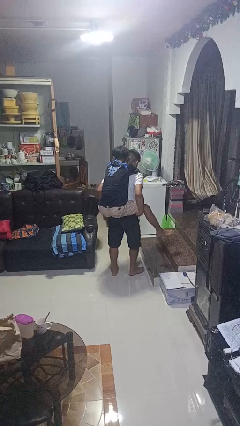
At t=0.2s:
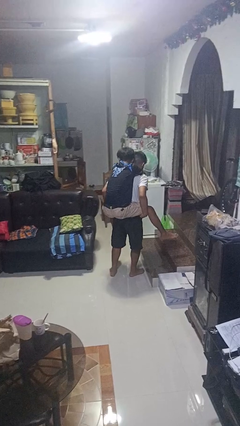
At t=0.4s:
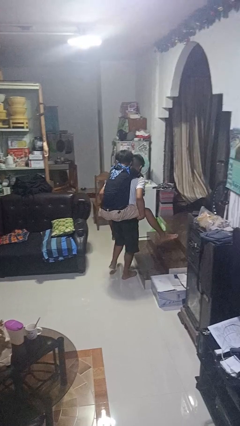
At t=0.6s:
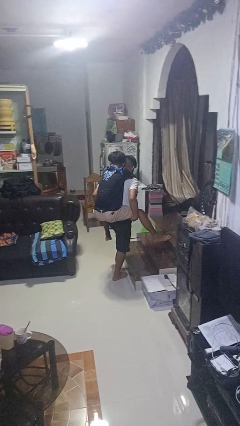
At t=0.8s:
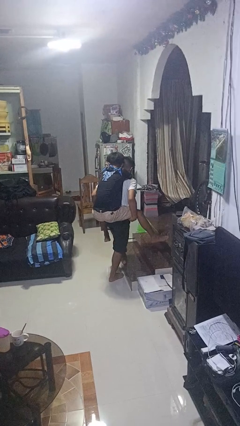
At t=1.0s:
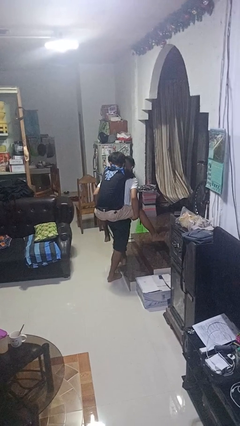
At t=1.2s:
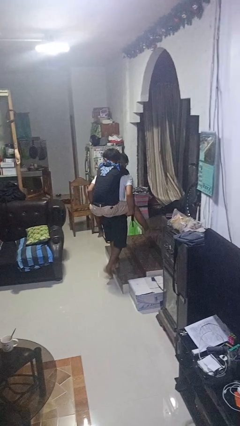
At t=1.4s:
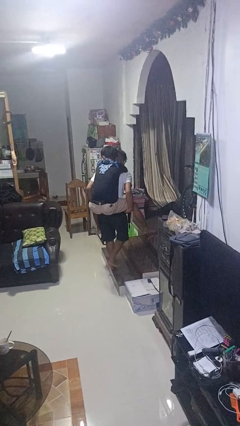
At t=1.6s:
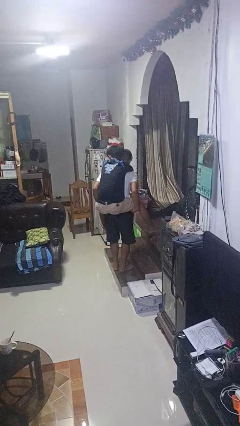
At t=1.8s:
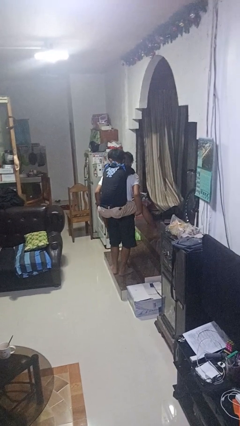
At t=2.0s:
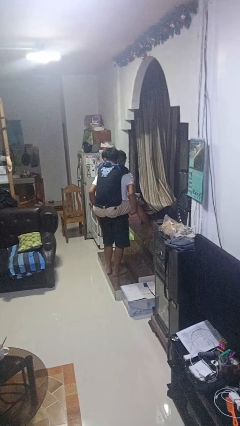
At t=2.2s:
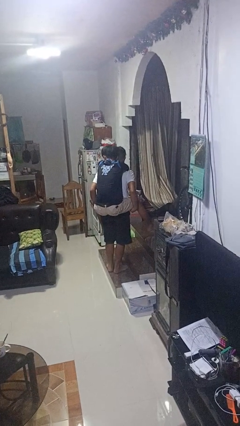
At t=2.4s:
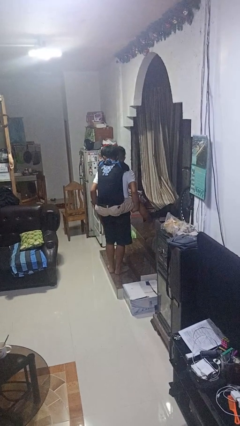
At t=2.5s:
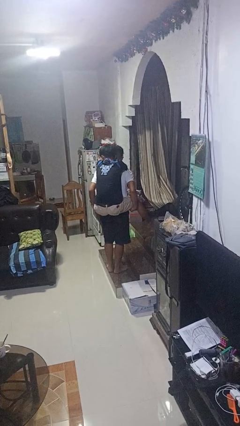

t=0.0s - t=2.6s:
person carries person on back

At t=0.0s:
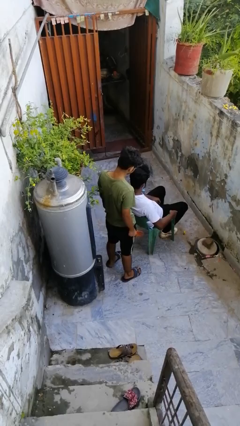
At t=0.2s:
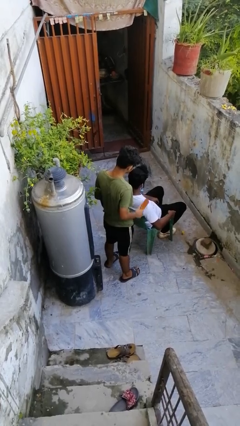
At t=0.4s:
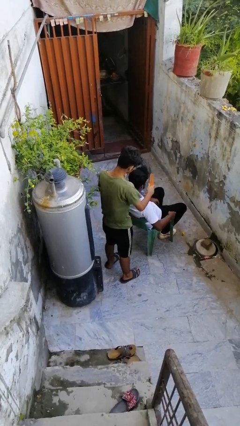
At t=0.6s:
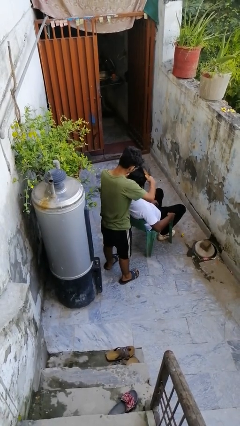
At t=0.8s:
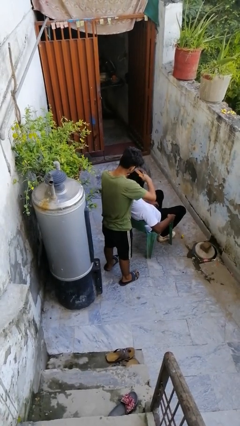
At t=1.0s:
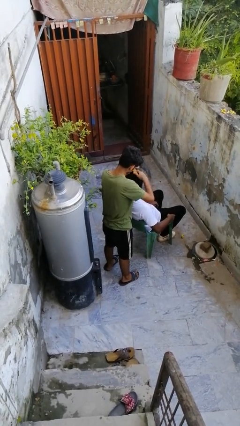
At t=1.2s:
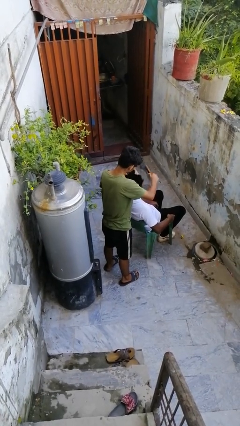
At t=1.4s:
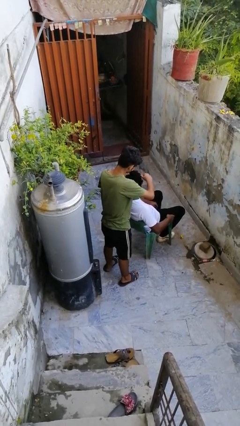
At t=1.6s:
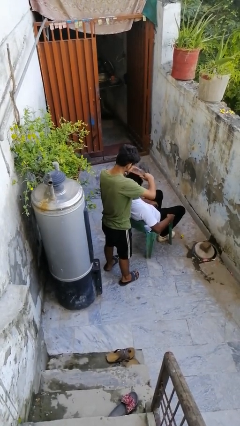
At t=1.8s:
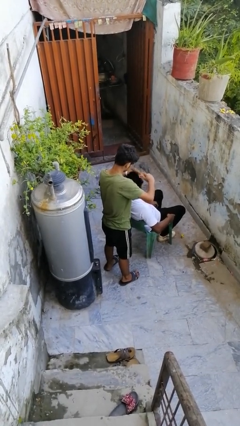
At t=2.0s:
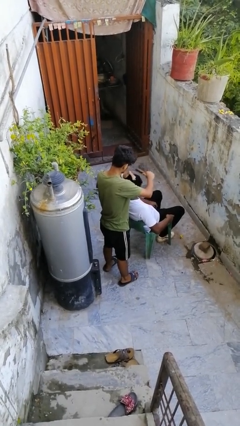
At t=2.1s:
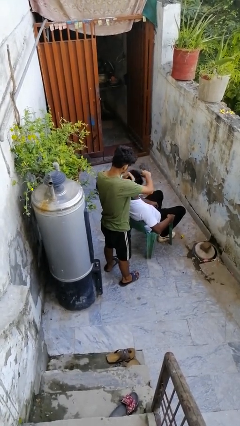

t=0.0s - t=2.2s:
person brushes hair of person

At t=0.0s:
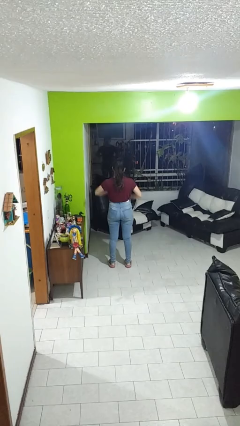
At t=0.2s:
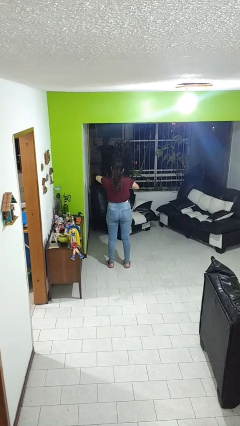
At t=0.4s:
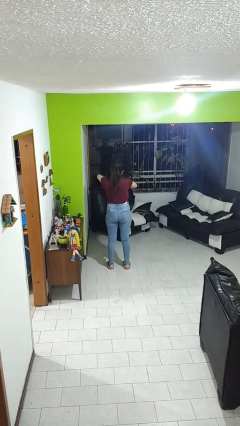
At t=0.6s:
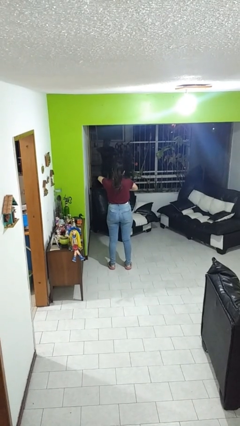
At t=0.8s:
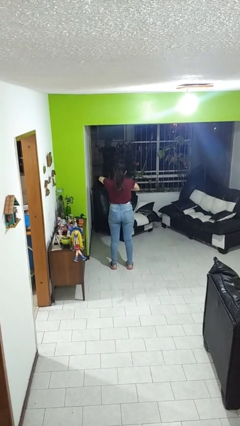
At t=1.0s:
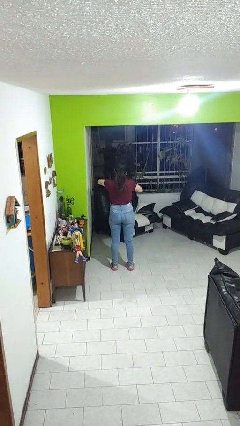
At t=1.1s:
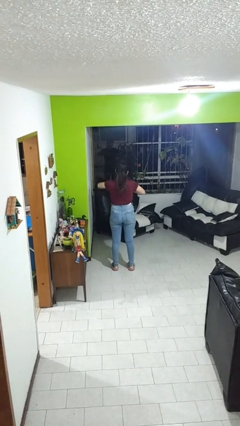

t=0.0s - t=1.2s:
person cracks knuckles

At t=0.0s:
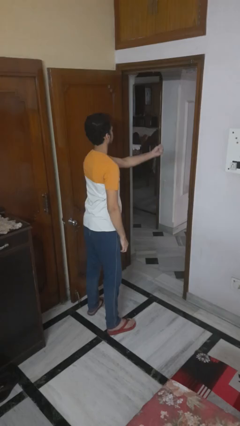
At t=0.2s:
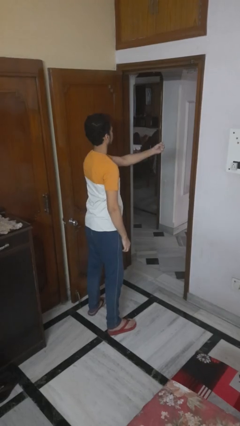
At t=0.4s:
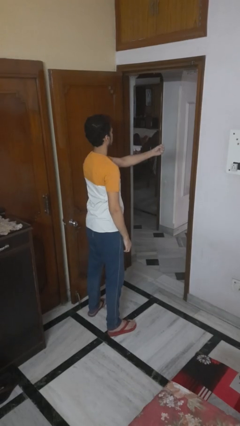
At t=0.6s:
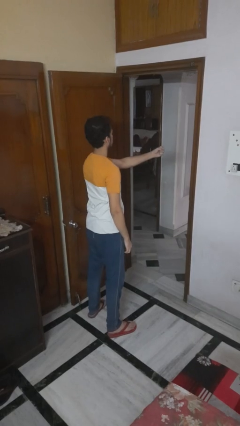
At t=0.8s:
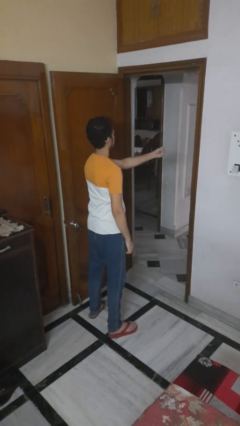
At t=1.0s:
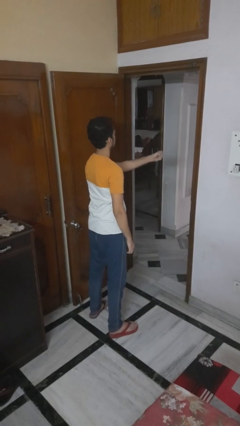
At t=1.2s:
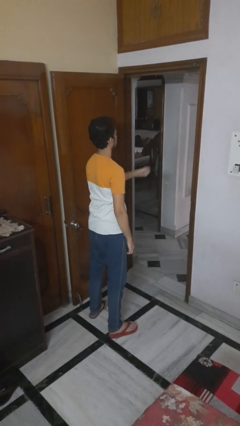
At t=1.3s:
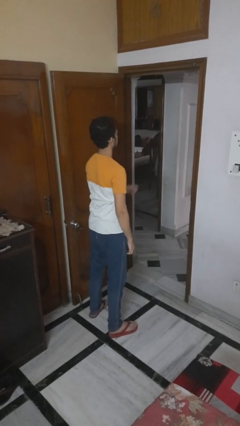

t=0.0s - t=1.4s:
person punches

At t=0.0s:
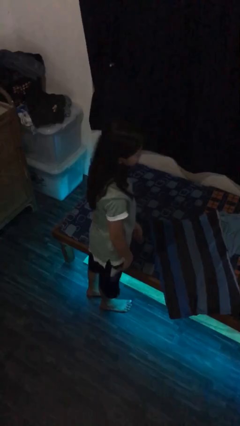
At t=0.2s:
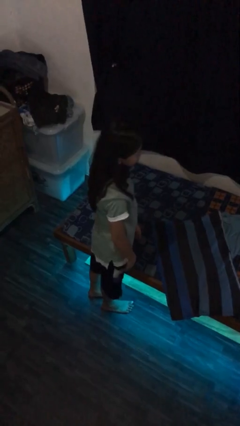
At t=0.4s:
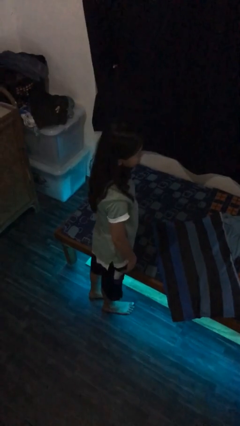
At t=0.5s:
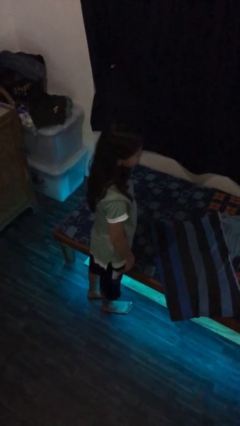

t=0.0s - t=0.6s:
person puts down object on bed

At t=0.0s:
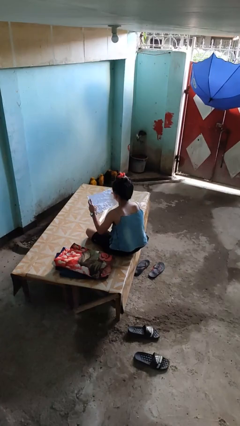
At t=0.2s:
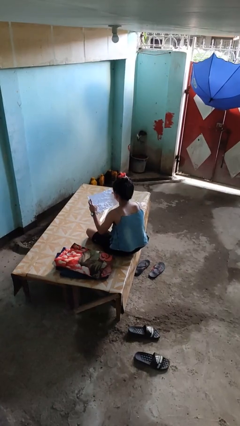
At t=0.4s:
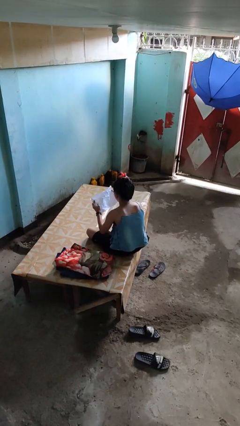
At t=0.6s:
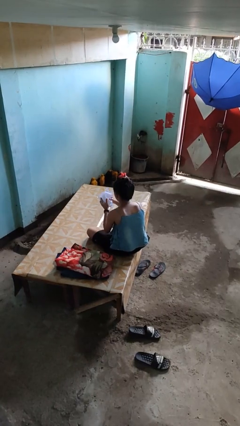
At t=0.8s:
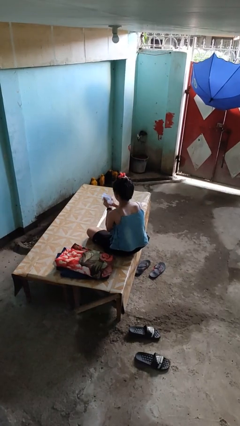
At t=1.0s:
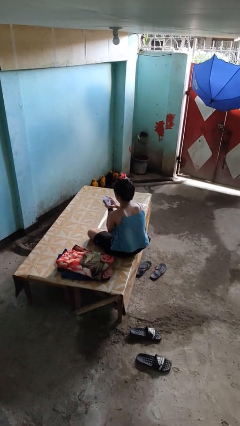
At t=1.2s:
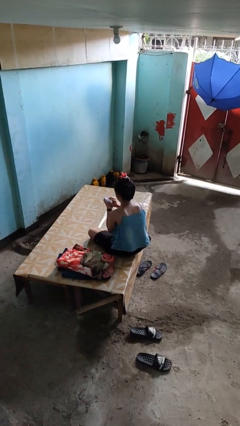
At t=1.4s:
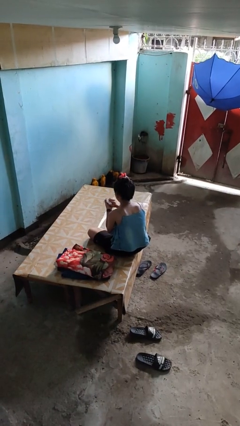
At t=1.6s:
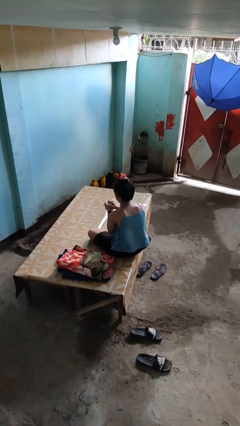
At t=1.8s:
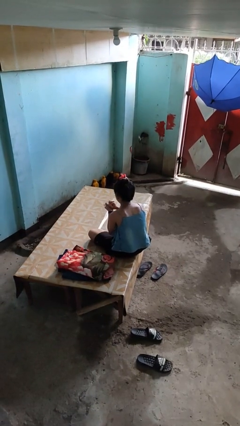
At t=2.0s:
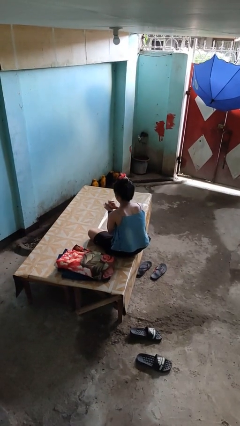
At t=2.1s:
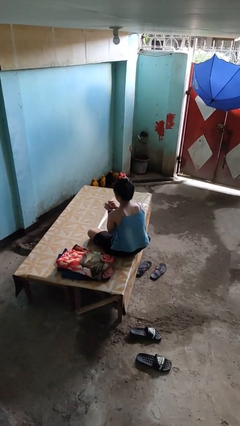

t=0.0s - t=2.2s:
person crumples paper

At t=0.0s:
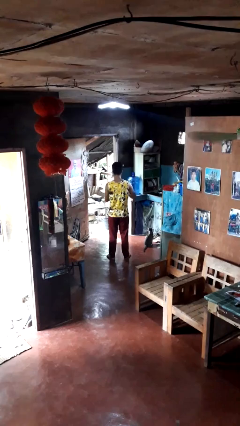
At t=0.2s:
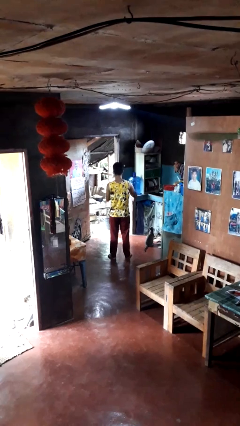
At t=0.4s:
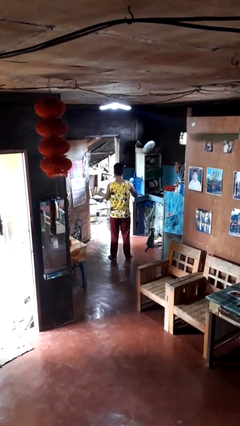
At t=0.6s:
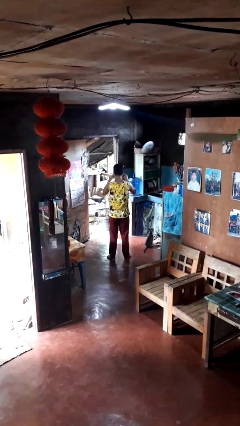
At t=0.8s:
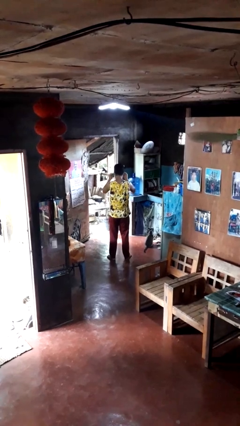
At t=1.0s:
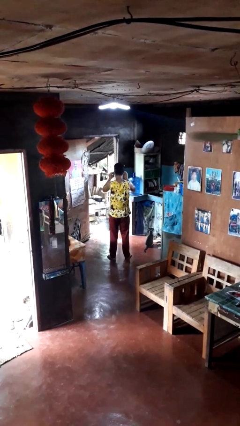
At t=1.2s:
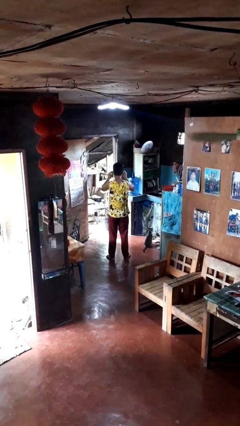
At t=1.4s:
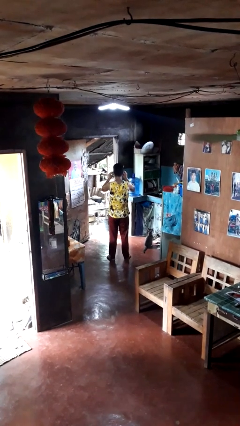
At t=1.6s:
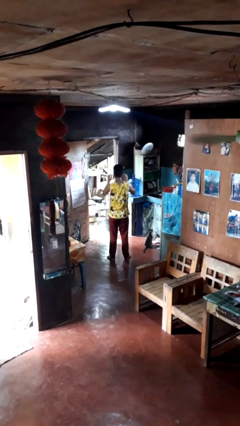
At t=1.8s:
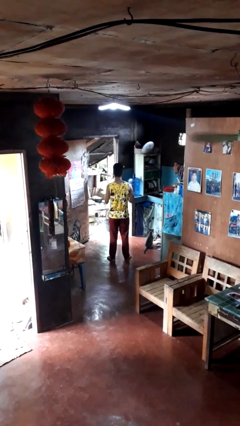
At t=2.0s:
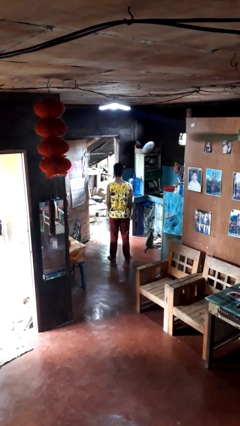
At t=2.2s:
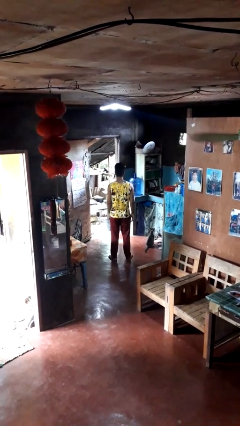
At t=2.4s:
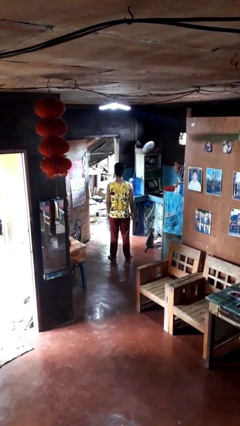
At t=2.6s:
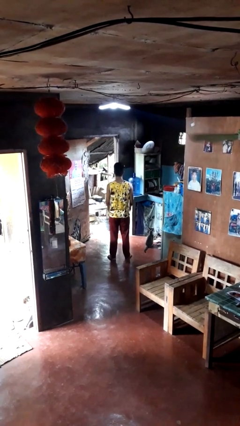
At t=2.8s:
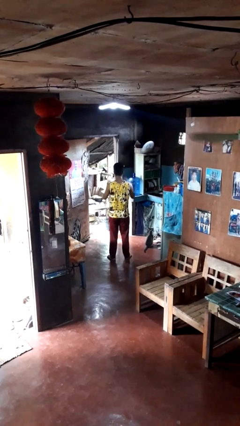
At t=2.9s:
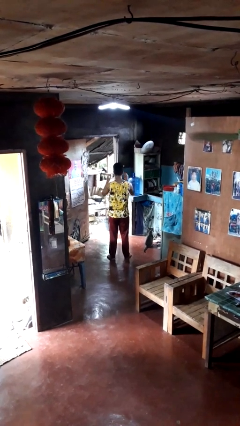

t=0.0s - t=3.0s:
person puts on glasses

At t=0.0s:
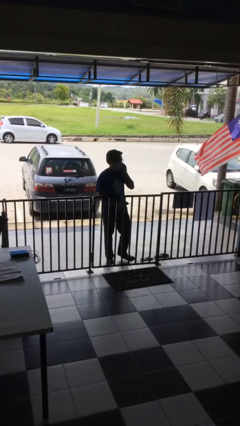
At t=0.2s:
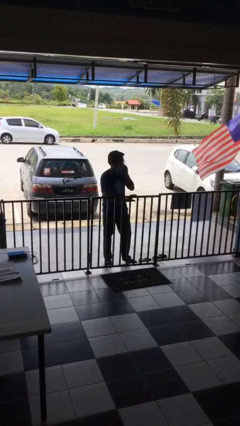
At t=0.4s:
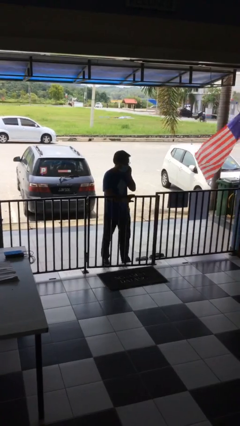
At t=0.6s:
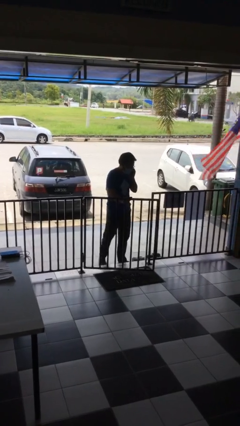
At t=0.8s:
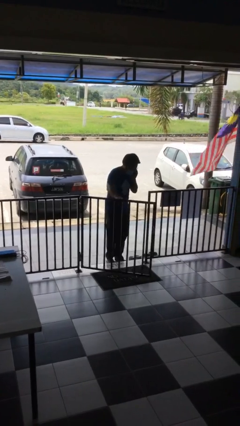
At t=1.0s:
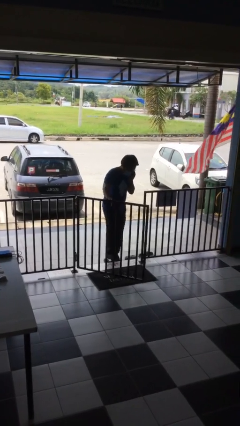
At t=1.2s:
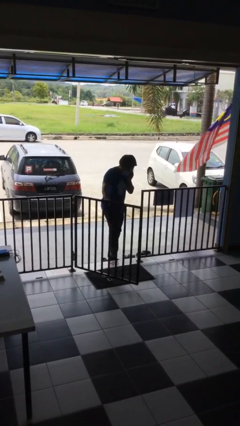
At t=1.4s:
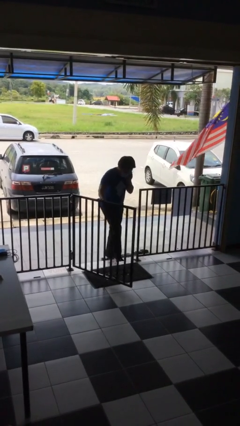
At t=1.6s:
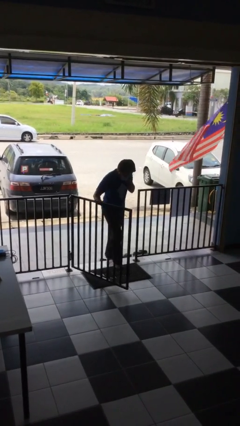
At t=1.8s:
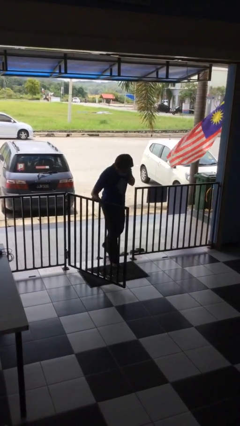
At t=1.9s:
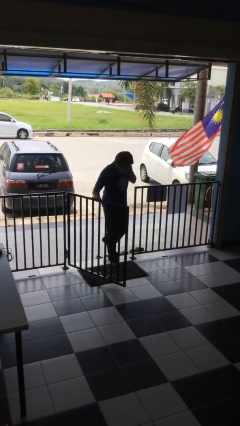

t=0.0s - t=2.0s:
person opens facility door

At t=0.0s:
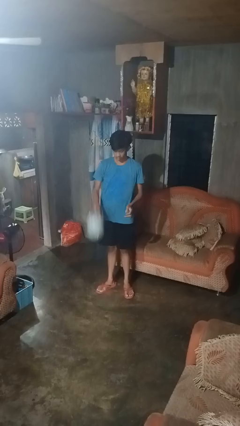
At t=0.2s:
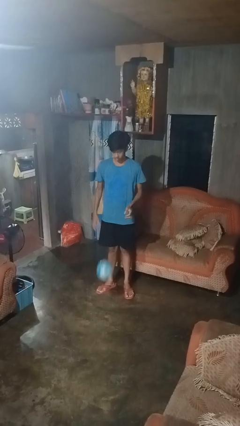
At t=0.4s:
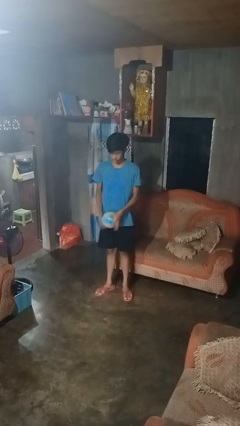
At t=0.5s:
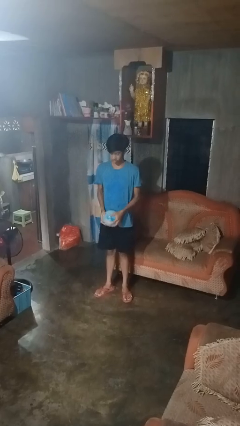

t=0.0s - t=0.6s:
person bounces ball on floor

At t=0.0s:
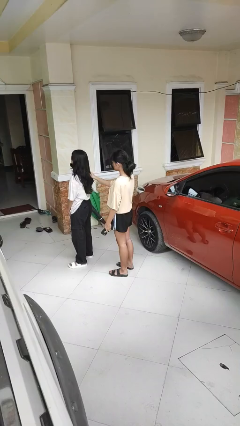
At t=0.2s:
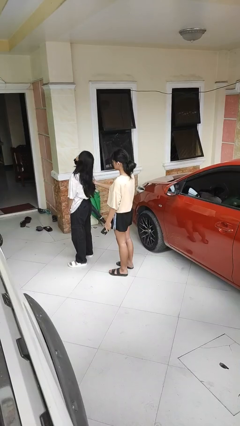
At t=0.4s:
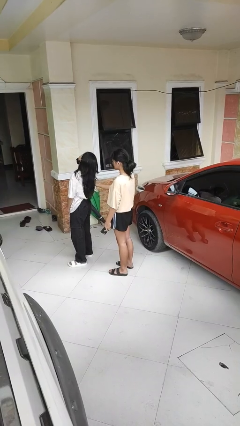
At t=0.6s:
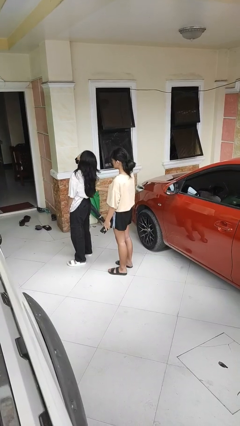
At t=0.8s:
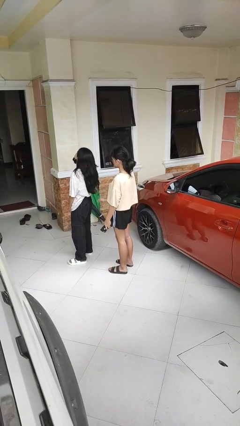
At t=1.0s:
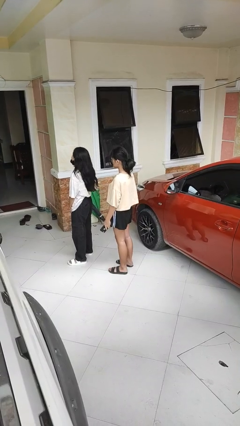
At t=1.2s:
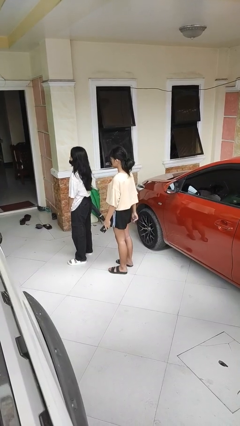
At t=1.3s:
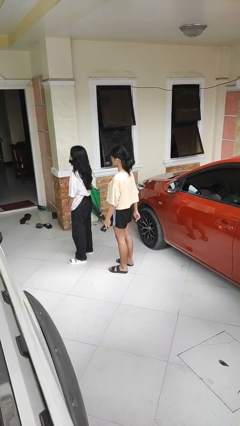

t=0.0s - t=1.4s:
person grabs person by hair
